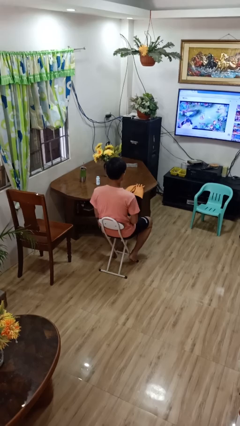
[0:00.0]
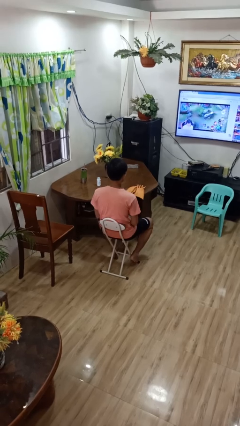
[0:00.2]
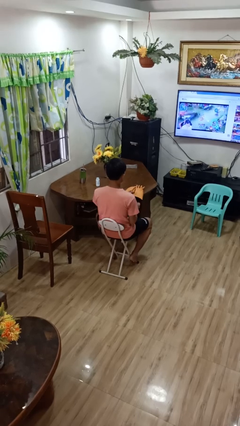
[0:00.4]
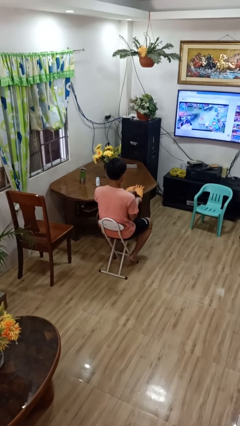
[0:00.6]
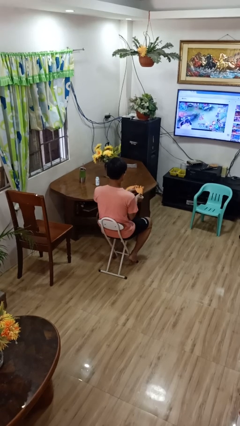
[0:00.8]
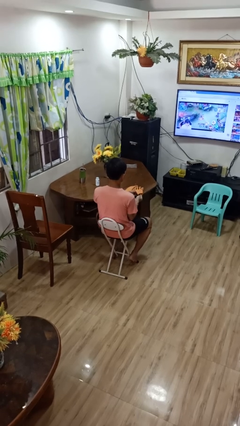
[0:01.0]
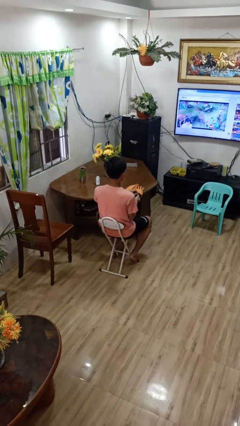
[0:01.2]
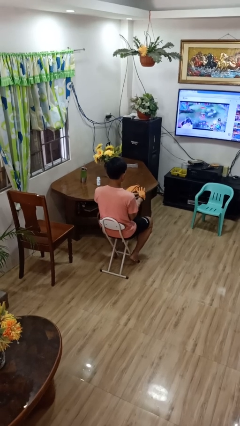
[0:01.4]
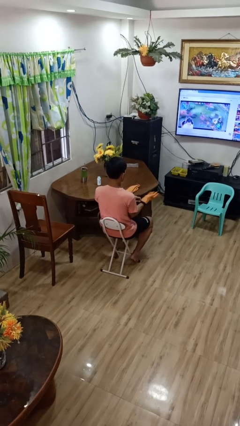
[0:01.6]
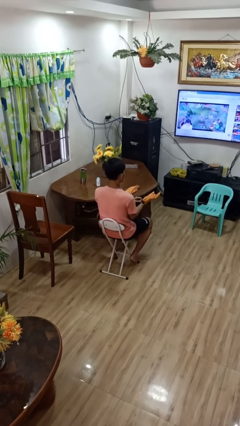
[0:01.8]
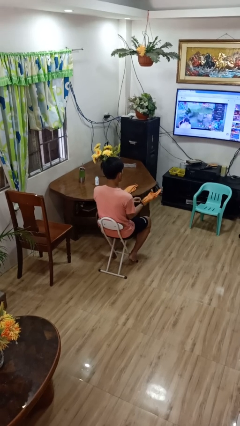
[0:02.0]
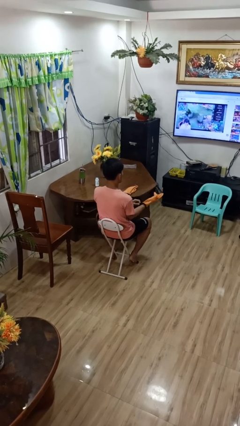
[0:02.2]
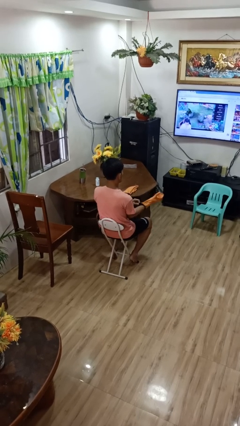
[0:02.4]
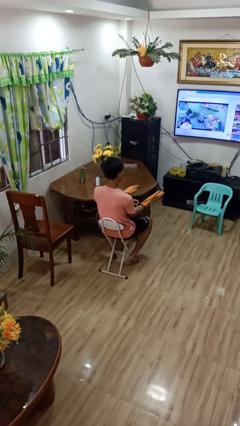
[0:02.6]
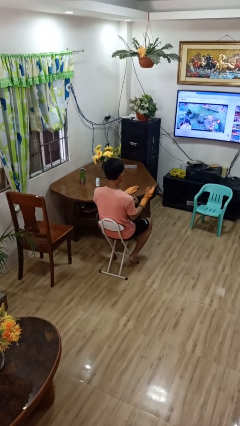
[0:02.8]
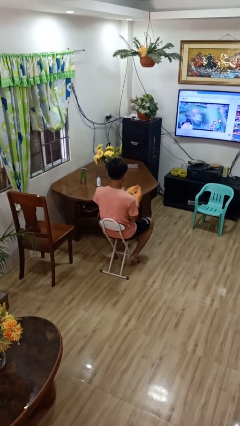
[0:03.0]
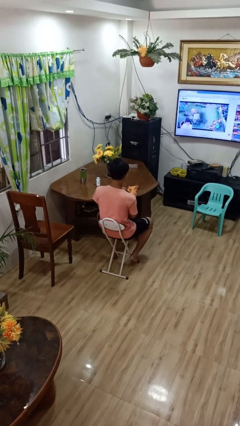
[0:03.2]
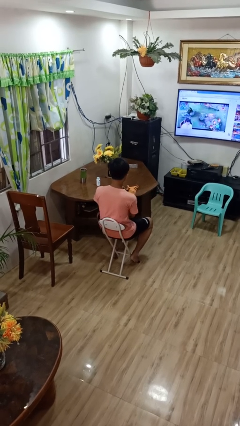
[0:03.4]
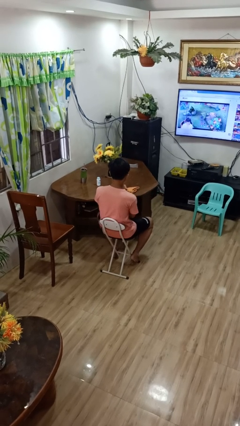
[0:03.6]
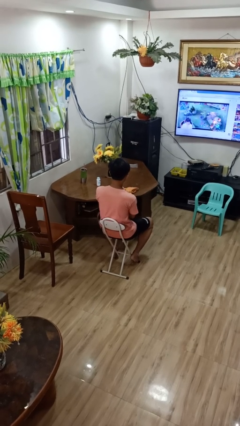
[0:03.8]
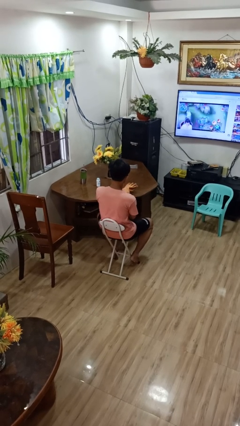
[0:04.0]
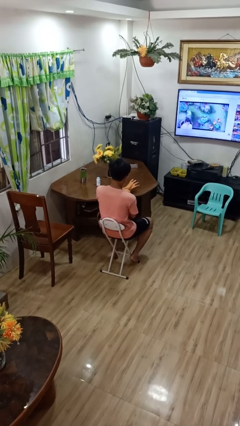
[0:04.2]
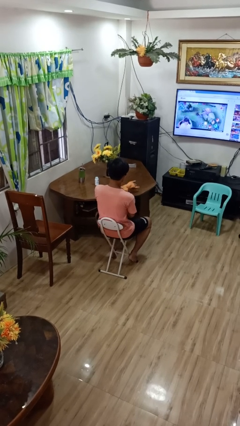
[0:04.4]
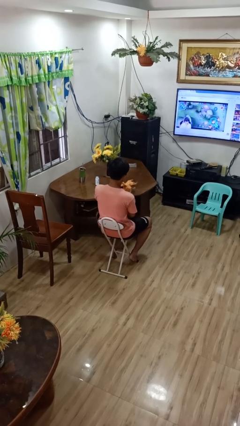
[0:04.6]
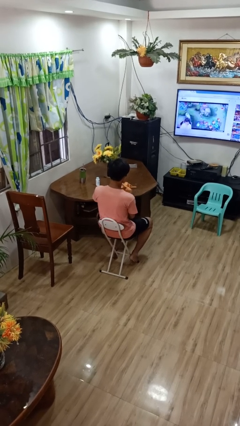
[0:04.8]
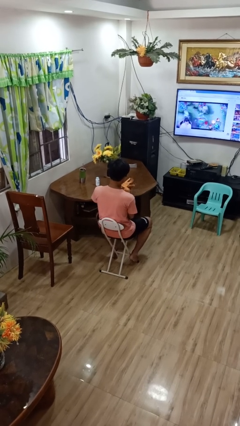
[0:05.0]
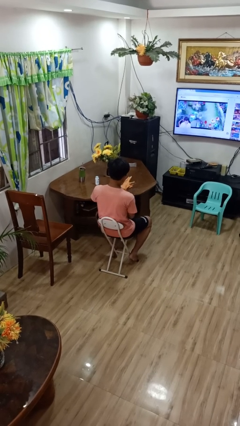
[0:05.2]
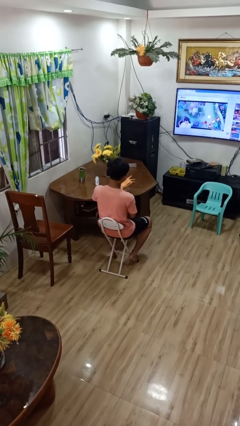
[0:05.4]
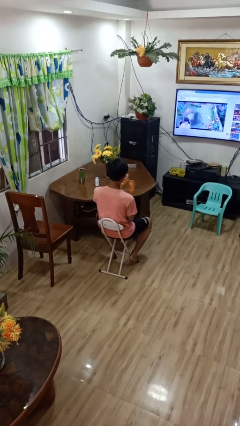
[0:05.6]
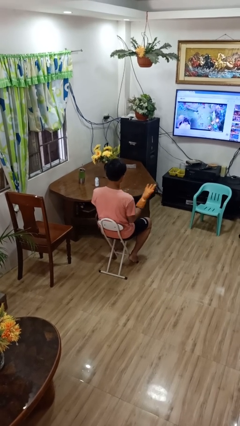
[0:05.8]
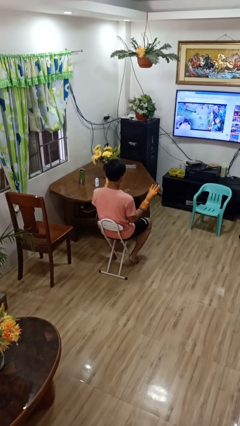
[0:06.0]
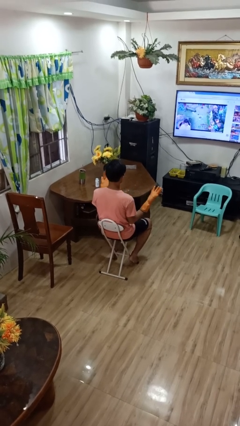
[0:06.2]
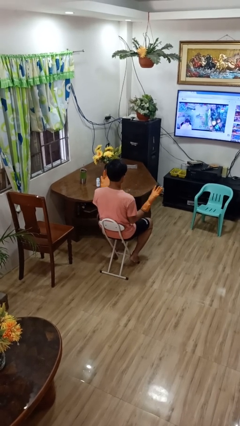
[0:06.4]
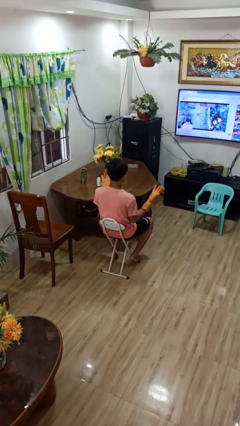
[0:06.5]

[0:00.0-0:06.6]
person puts on gloves

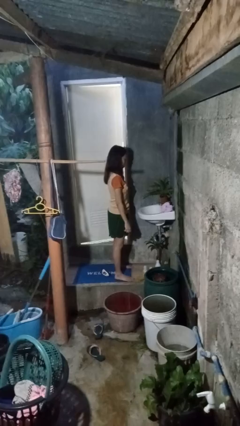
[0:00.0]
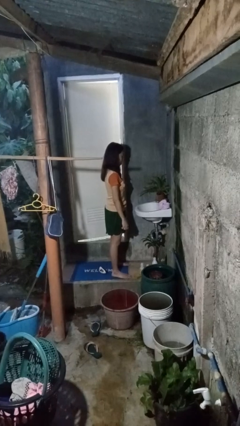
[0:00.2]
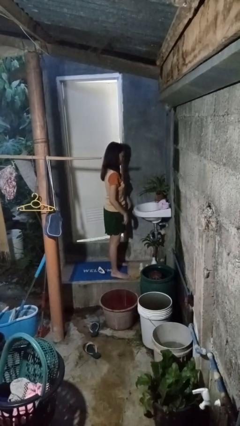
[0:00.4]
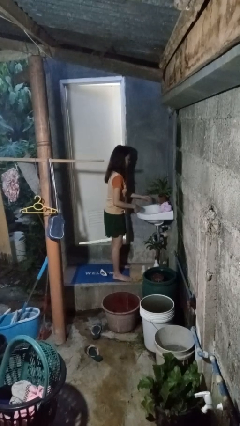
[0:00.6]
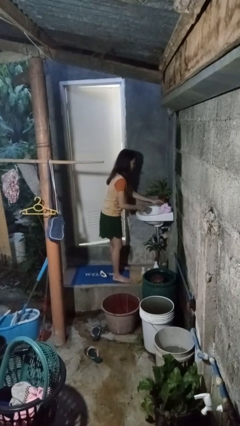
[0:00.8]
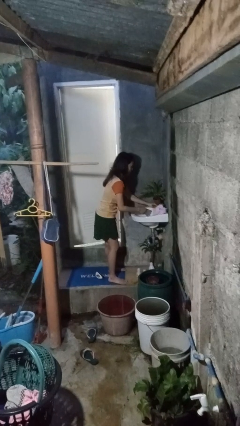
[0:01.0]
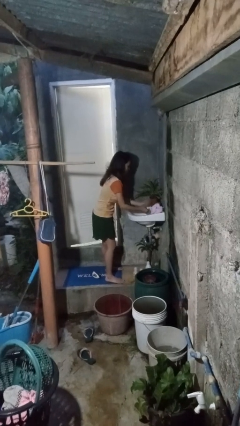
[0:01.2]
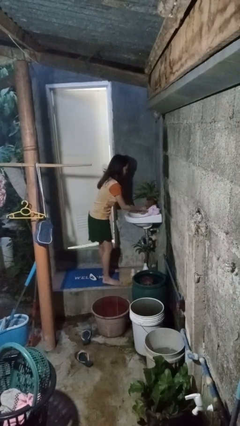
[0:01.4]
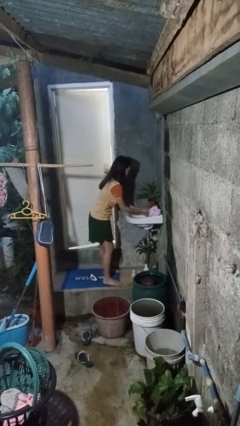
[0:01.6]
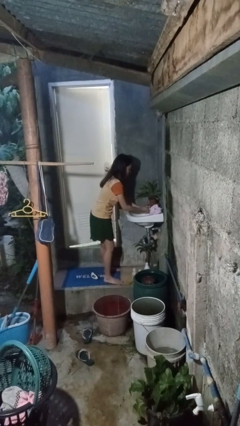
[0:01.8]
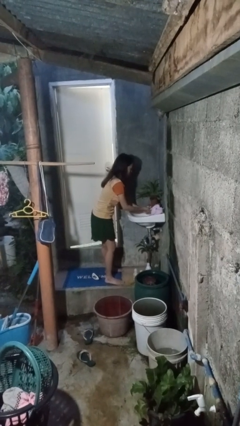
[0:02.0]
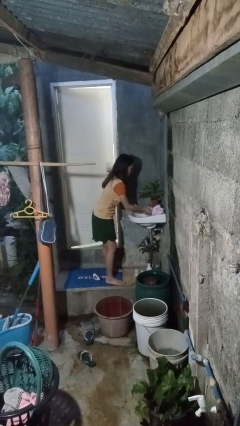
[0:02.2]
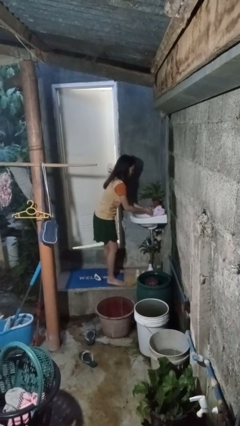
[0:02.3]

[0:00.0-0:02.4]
person washes hands

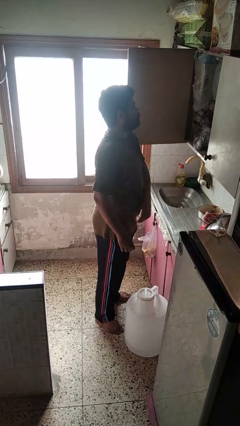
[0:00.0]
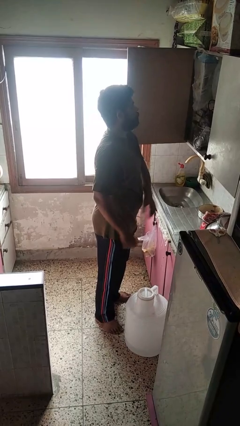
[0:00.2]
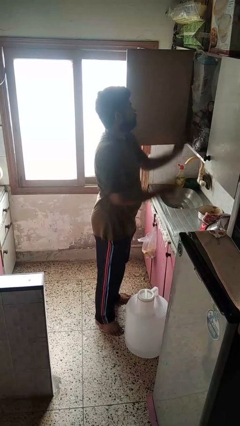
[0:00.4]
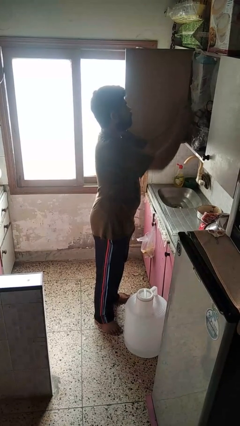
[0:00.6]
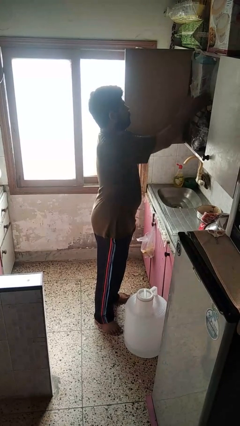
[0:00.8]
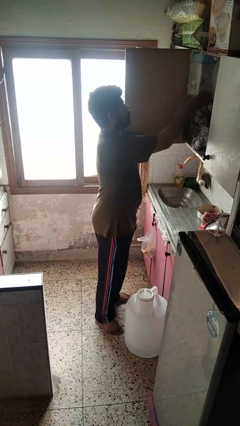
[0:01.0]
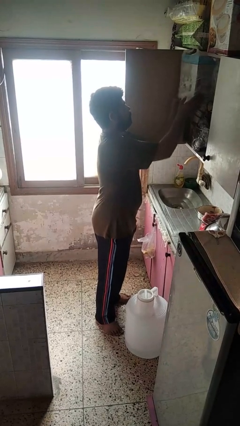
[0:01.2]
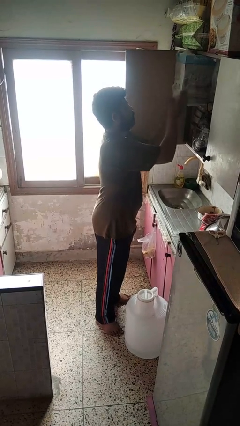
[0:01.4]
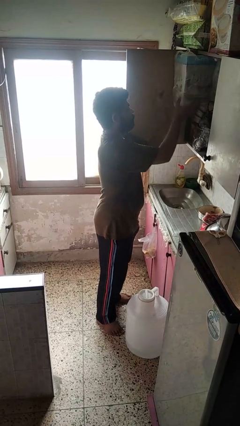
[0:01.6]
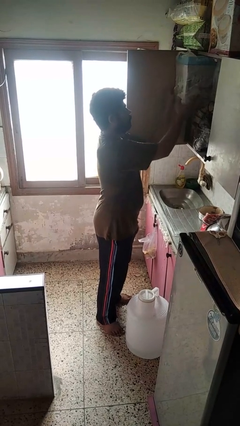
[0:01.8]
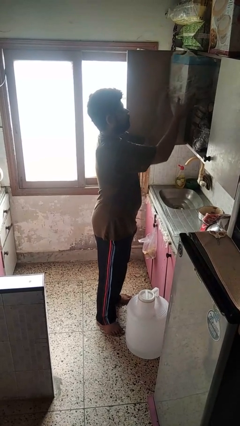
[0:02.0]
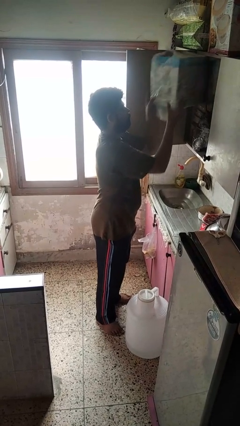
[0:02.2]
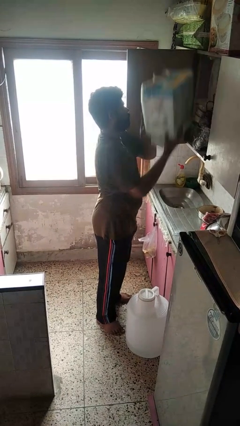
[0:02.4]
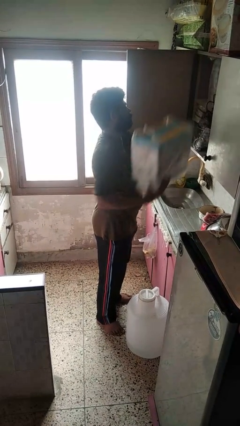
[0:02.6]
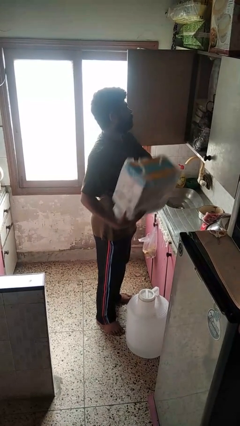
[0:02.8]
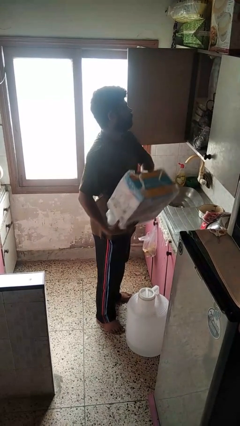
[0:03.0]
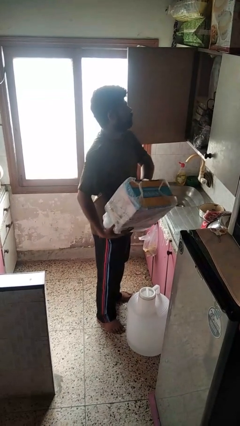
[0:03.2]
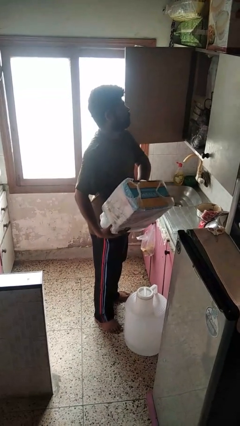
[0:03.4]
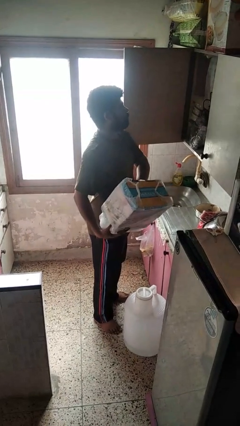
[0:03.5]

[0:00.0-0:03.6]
person picks up object from cabinet

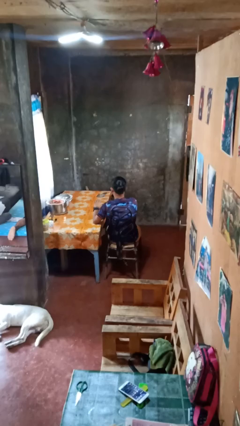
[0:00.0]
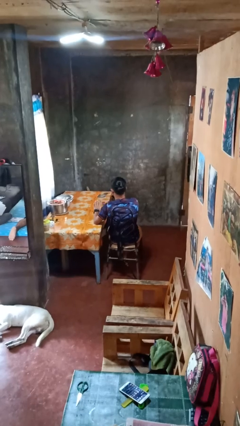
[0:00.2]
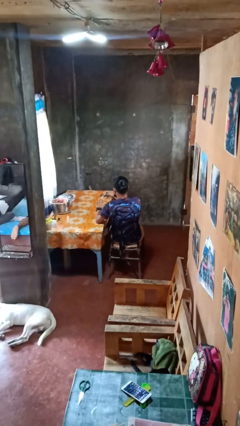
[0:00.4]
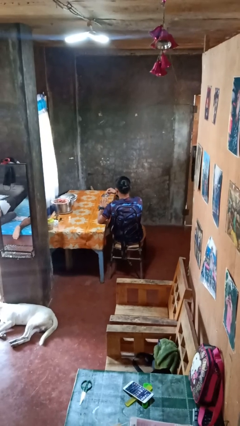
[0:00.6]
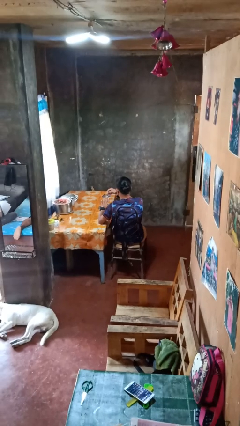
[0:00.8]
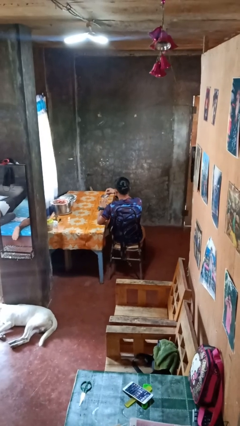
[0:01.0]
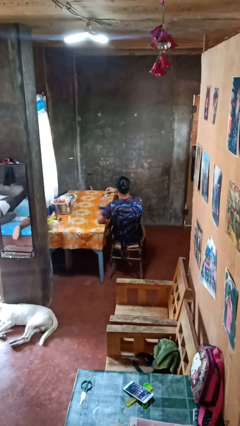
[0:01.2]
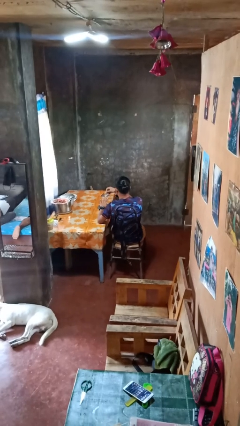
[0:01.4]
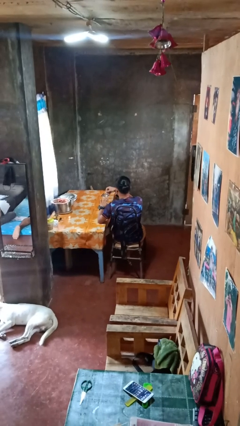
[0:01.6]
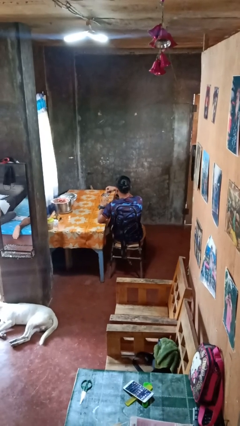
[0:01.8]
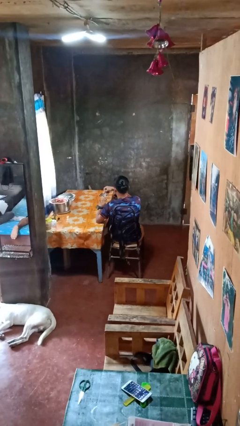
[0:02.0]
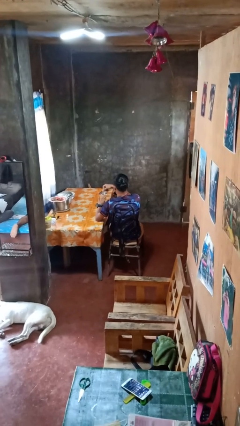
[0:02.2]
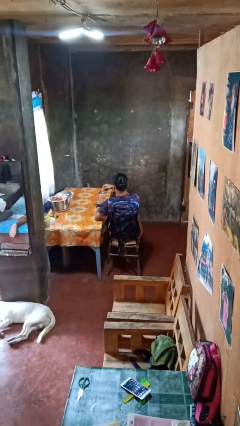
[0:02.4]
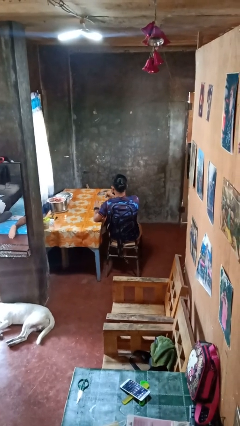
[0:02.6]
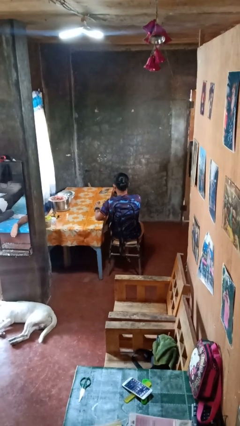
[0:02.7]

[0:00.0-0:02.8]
person clips fingernails

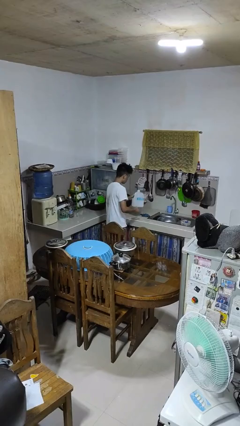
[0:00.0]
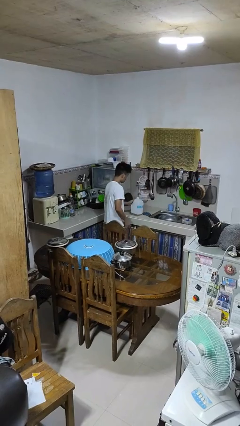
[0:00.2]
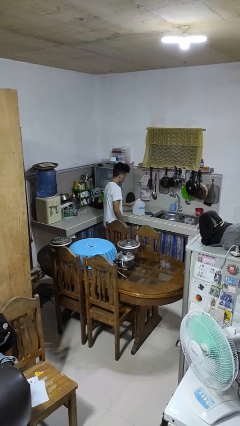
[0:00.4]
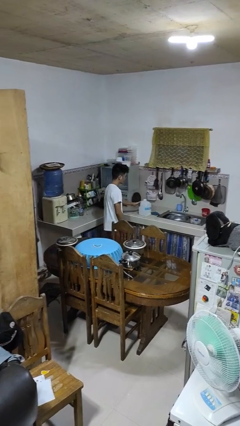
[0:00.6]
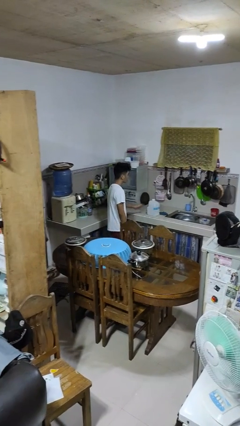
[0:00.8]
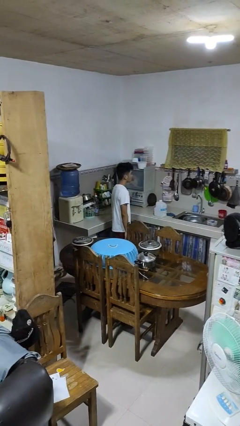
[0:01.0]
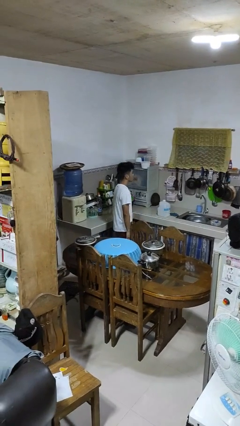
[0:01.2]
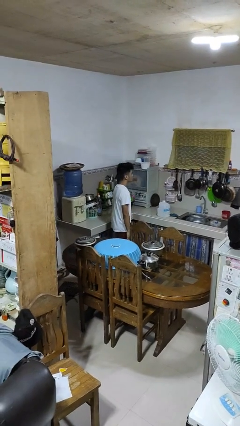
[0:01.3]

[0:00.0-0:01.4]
person puts down object on countertop

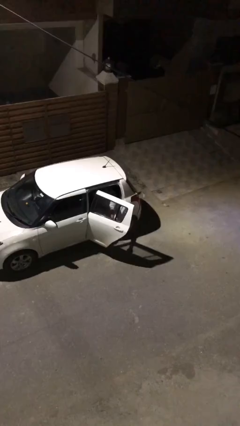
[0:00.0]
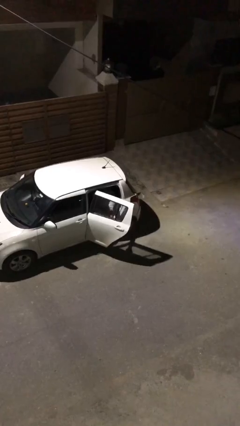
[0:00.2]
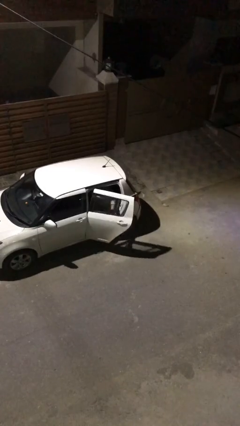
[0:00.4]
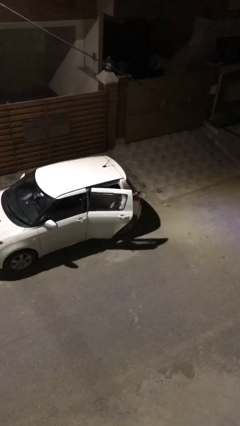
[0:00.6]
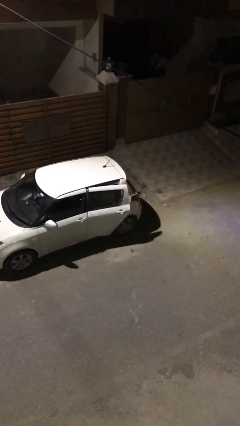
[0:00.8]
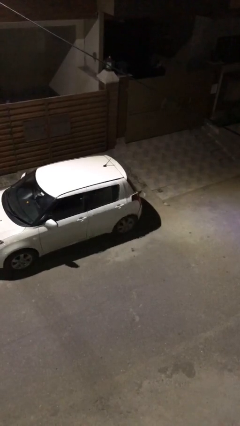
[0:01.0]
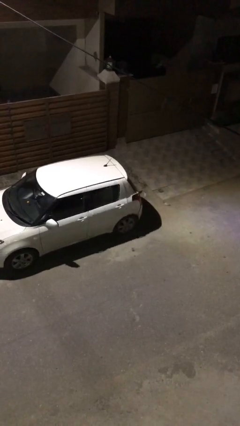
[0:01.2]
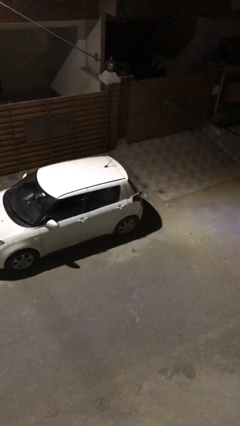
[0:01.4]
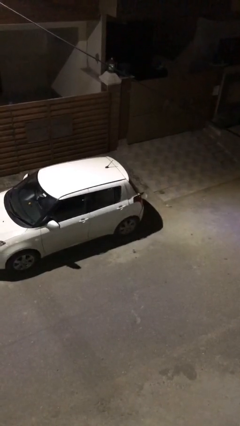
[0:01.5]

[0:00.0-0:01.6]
person closes car door
